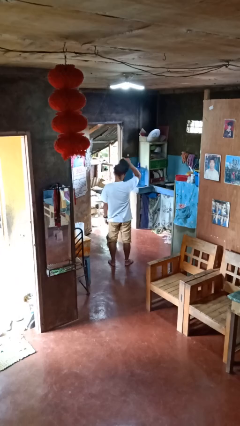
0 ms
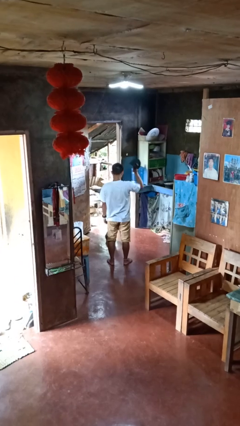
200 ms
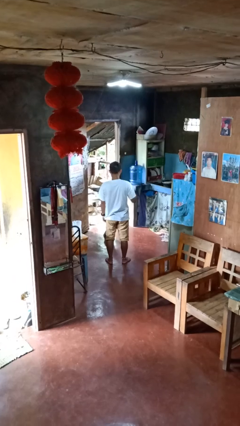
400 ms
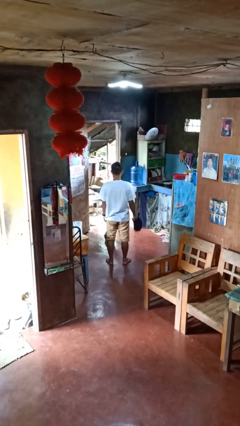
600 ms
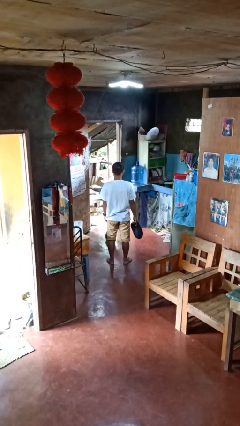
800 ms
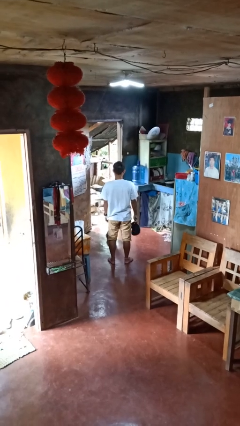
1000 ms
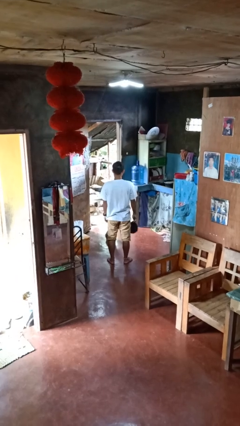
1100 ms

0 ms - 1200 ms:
person takes off hat

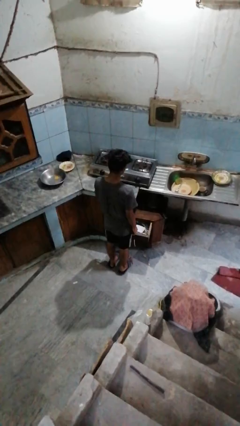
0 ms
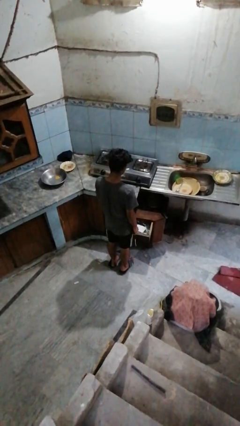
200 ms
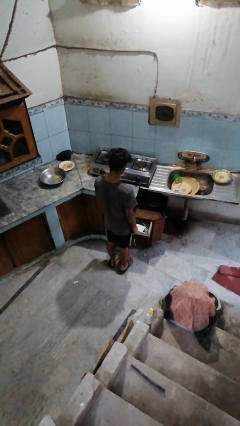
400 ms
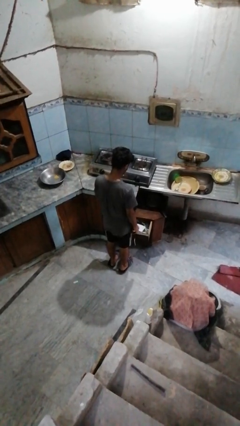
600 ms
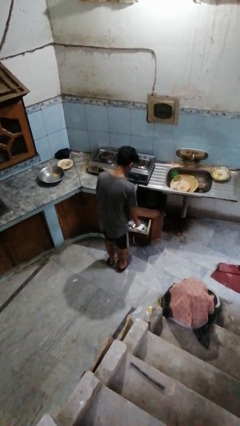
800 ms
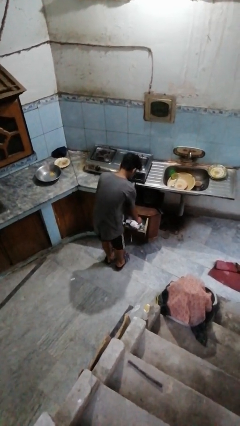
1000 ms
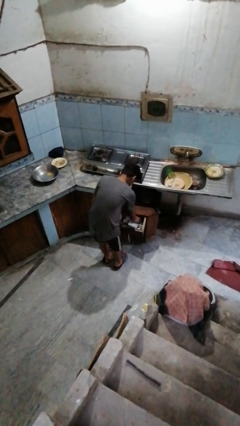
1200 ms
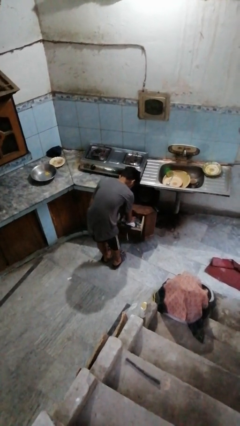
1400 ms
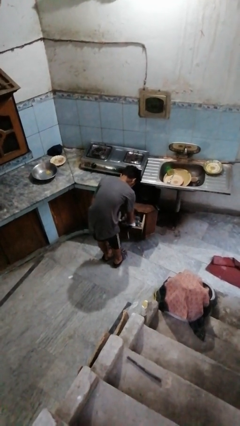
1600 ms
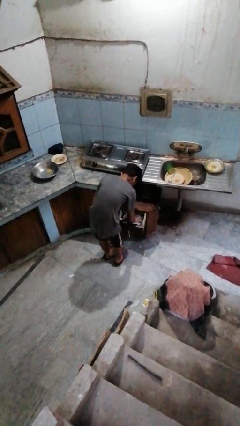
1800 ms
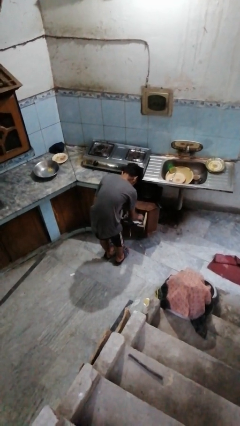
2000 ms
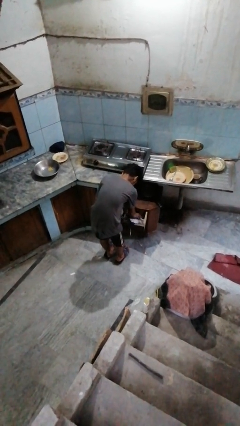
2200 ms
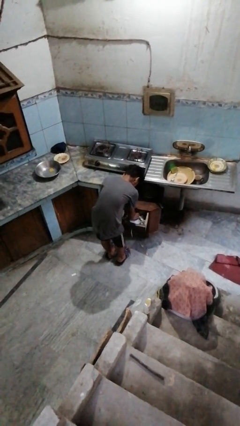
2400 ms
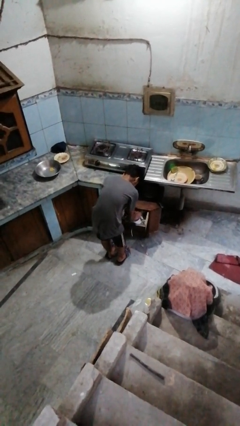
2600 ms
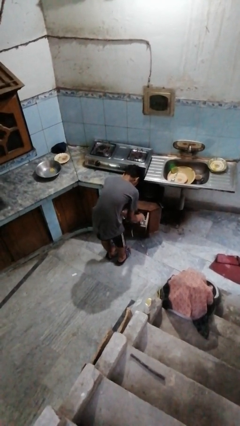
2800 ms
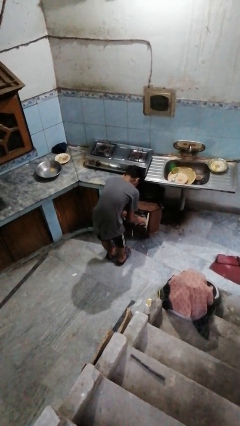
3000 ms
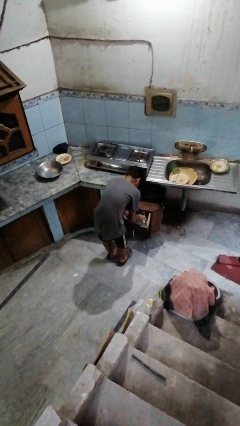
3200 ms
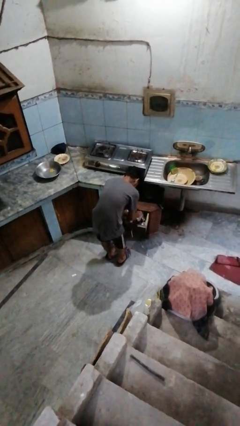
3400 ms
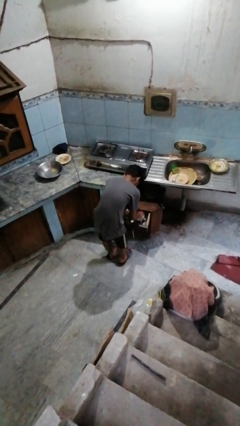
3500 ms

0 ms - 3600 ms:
person searches in kitchen drawer

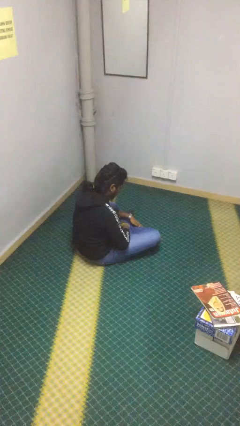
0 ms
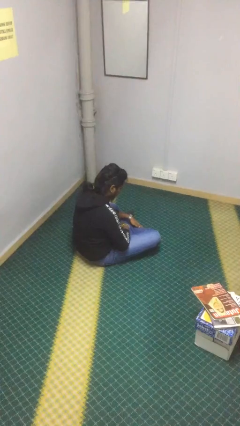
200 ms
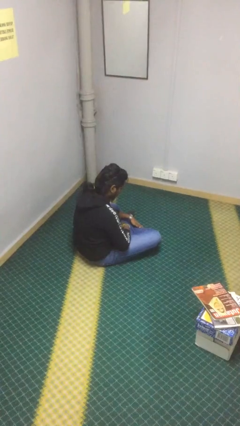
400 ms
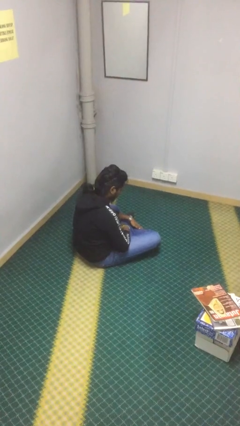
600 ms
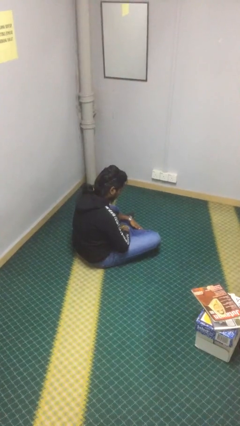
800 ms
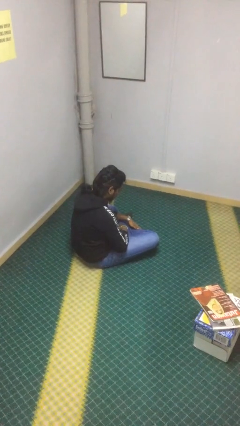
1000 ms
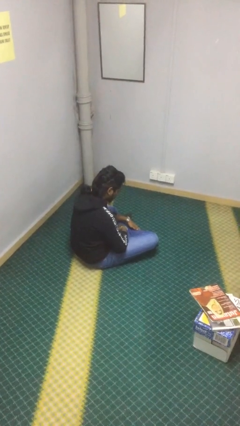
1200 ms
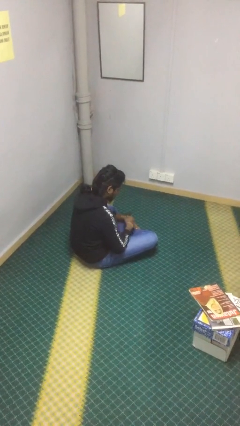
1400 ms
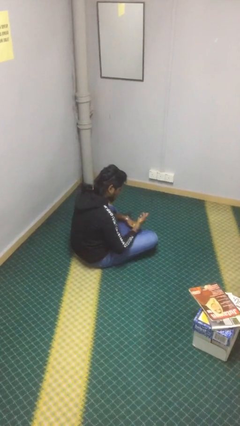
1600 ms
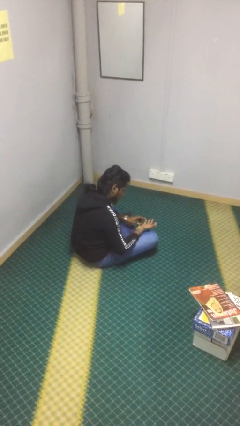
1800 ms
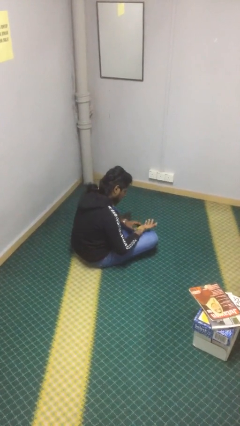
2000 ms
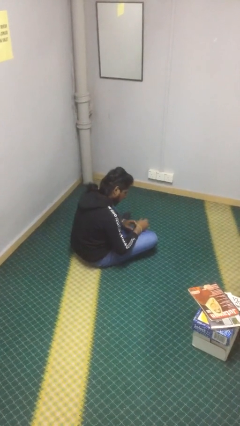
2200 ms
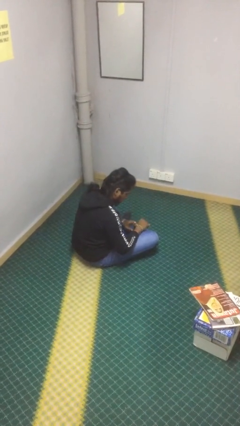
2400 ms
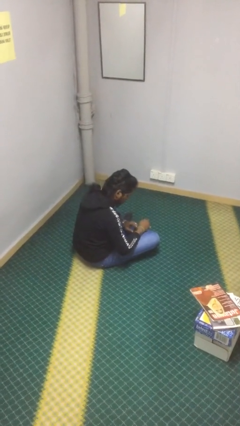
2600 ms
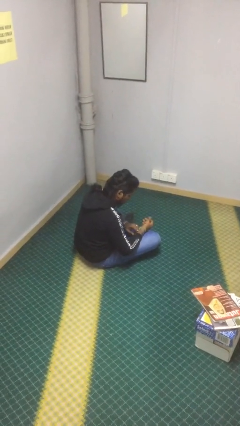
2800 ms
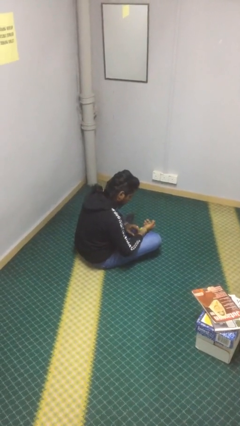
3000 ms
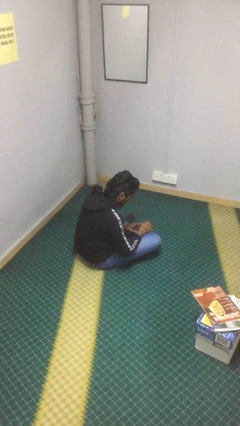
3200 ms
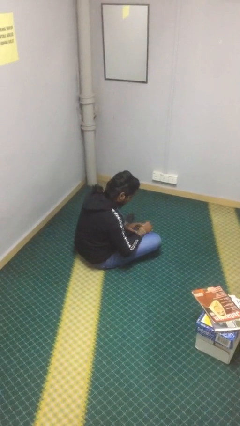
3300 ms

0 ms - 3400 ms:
person looks at hands in lap

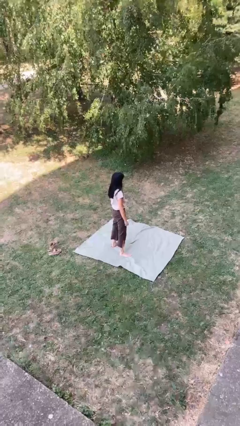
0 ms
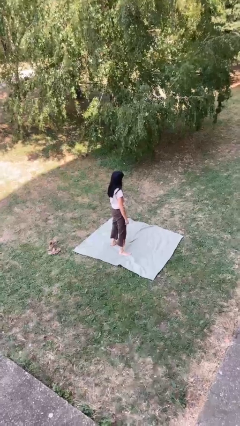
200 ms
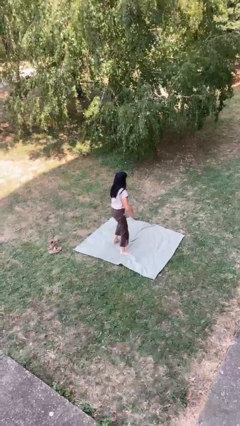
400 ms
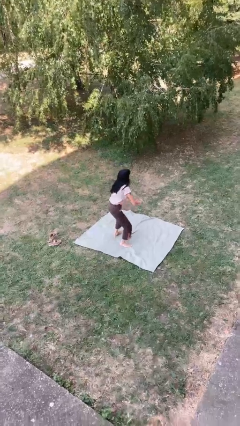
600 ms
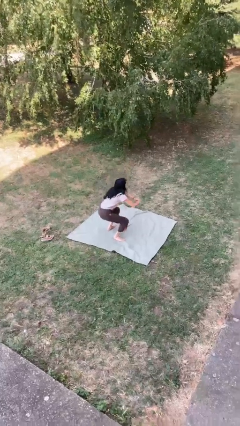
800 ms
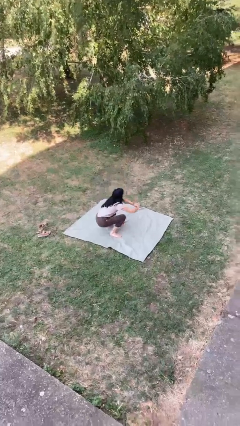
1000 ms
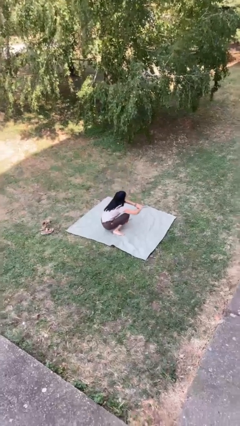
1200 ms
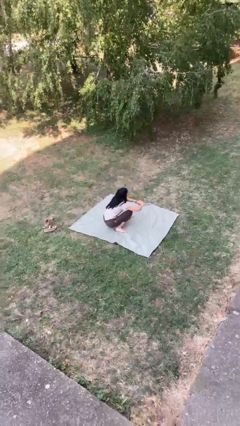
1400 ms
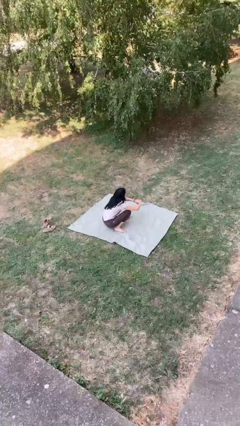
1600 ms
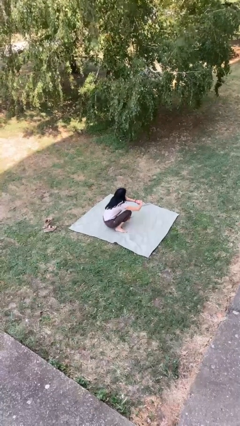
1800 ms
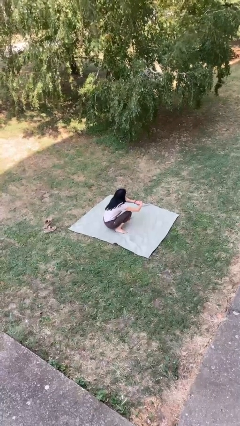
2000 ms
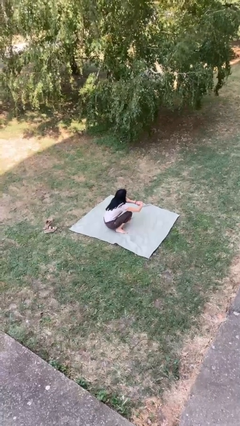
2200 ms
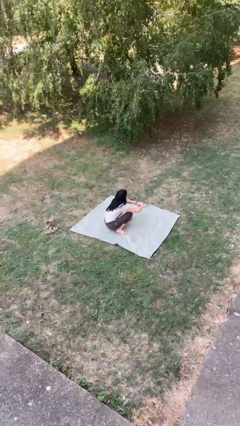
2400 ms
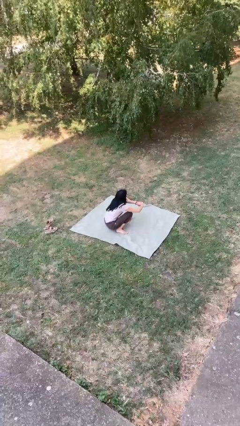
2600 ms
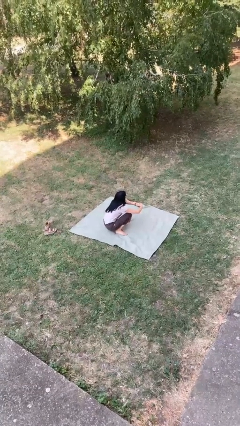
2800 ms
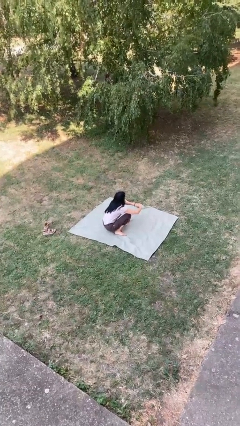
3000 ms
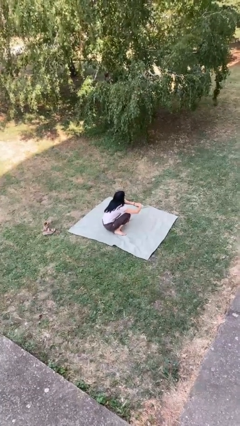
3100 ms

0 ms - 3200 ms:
person squats

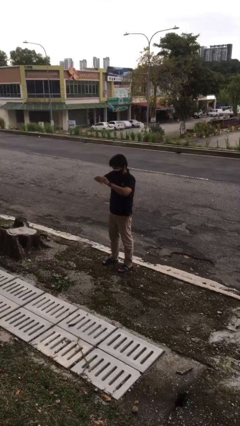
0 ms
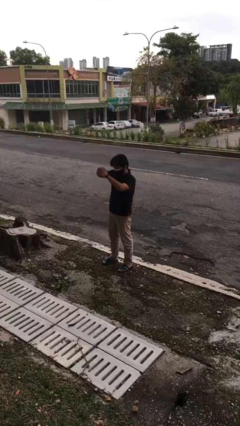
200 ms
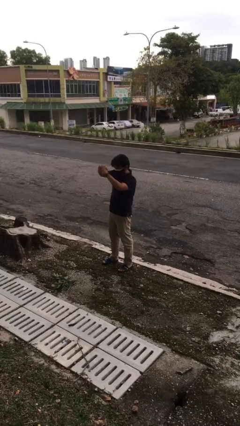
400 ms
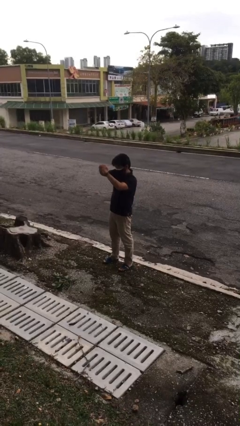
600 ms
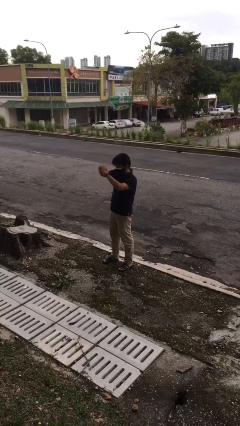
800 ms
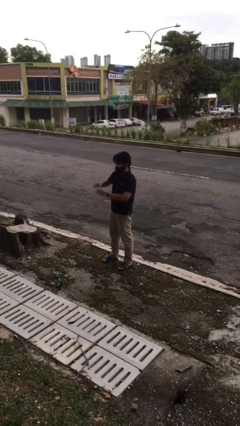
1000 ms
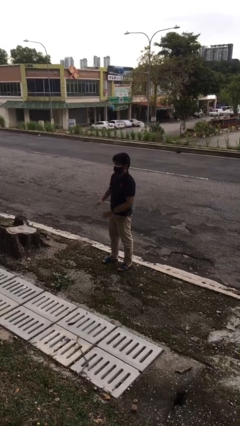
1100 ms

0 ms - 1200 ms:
person gestures heart

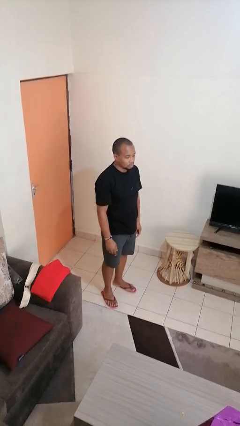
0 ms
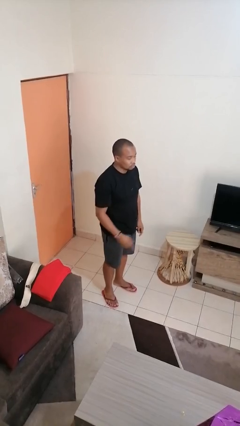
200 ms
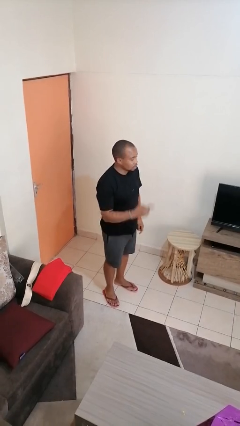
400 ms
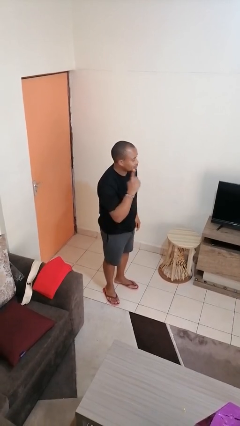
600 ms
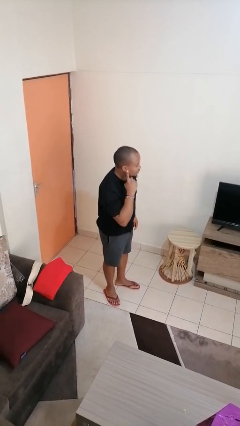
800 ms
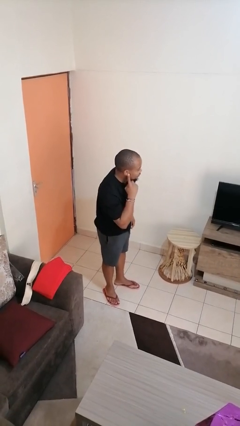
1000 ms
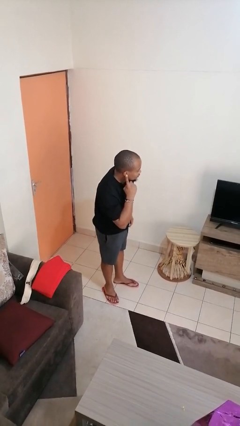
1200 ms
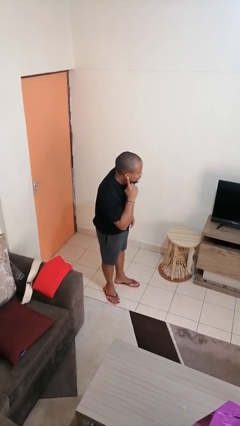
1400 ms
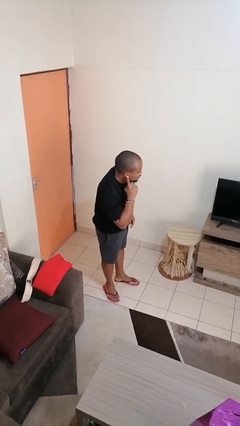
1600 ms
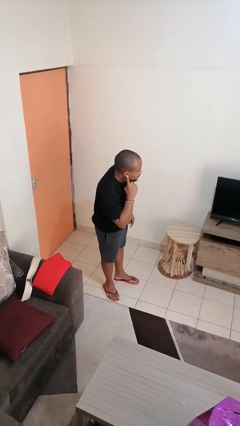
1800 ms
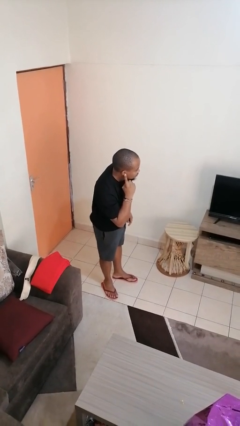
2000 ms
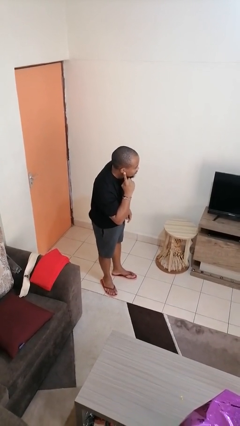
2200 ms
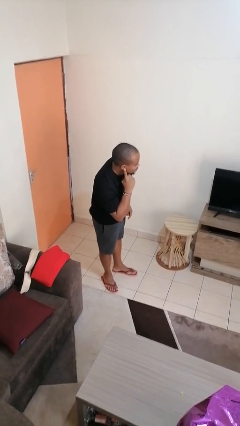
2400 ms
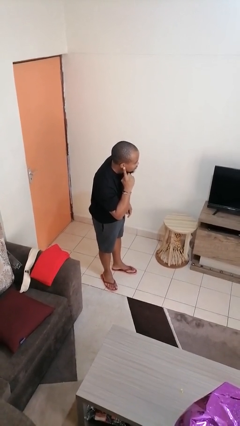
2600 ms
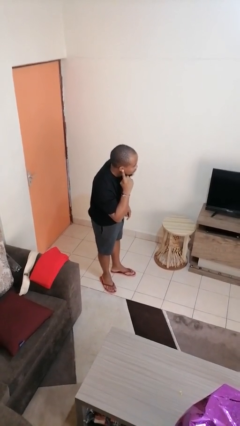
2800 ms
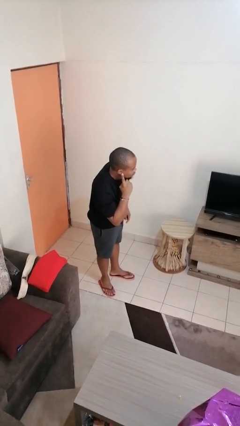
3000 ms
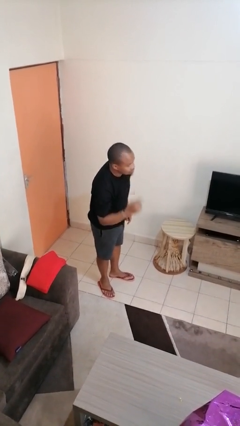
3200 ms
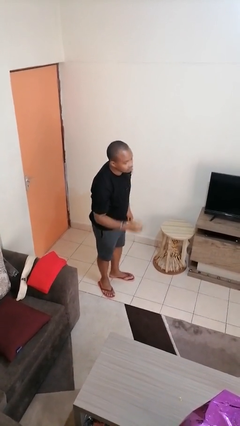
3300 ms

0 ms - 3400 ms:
person gestures listen closely

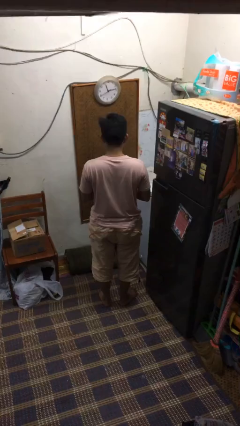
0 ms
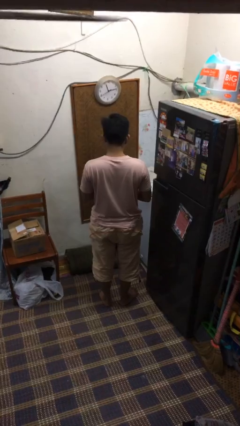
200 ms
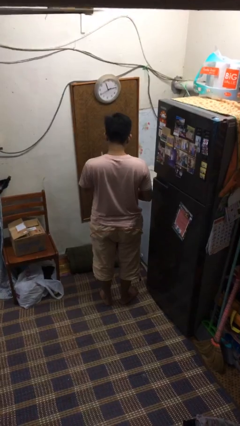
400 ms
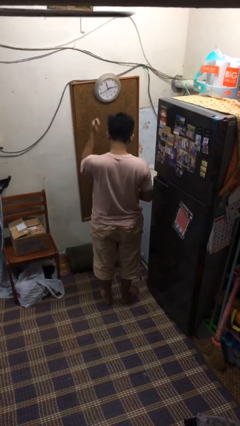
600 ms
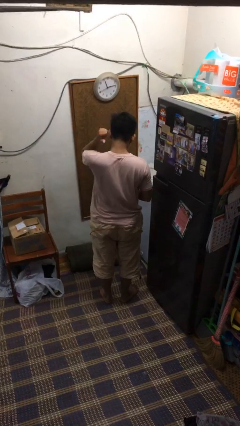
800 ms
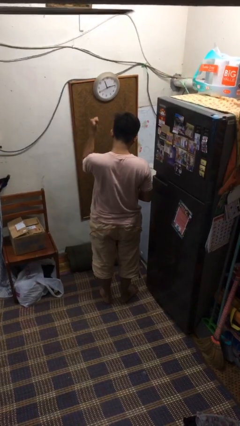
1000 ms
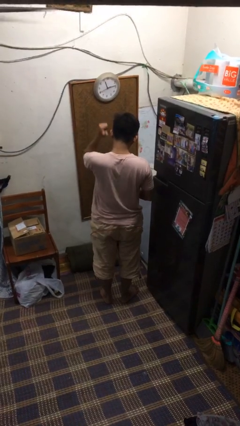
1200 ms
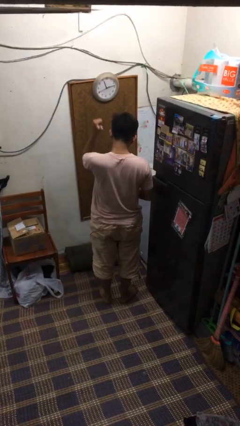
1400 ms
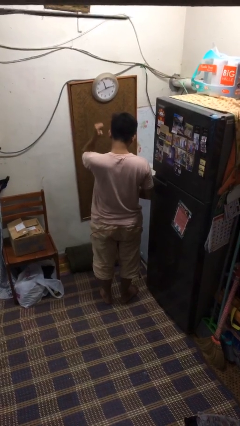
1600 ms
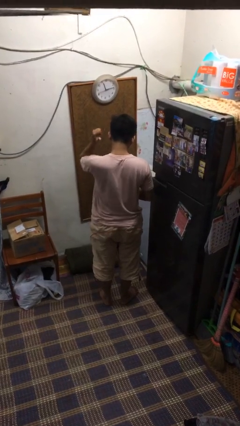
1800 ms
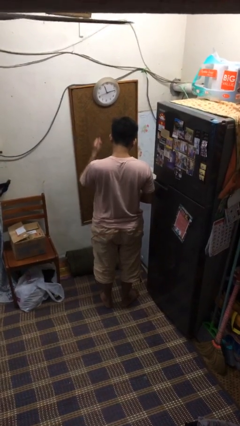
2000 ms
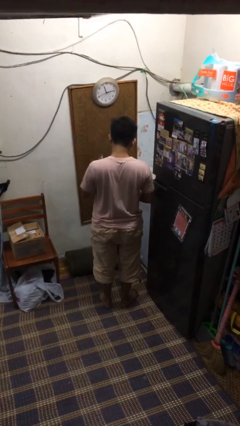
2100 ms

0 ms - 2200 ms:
person gestures behind me
